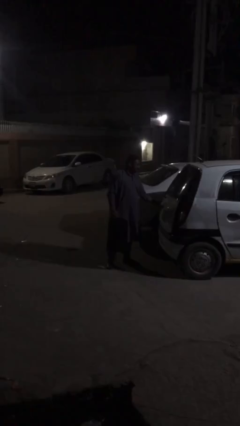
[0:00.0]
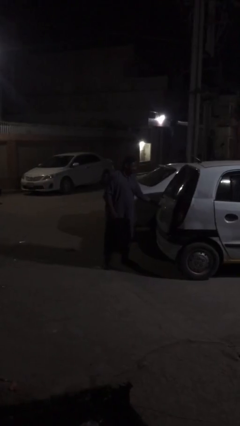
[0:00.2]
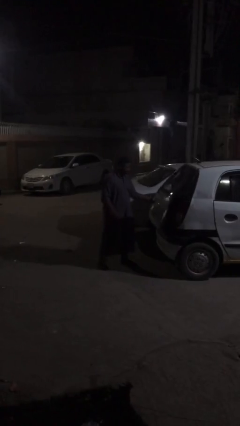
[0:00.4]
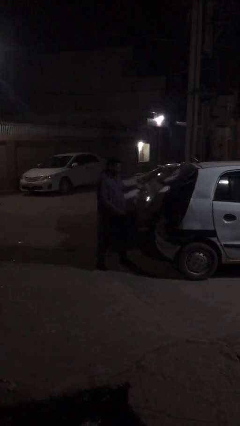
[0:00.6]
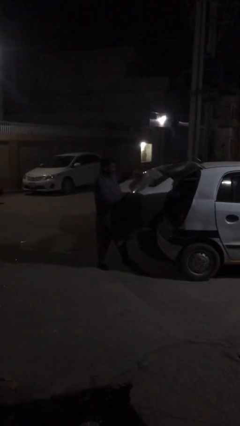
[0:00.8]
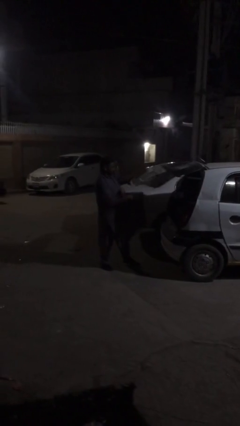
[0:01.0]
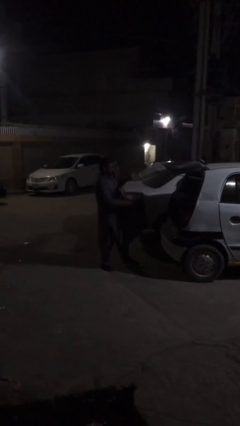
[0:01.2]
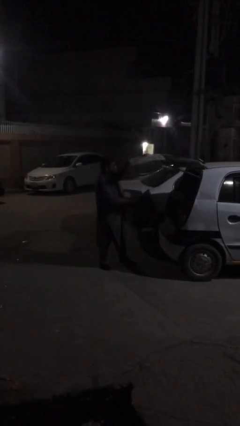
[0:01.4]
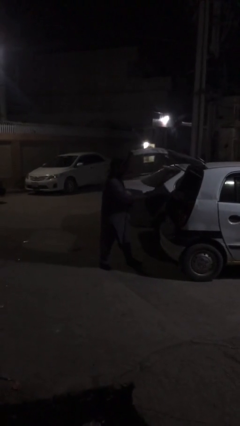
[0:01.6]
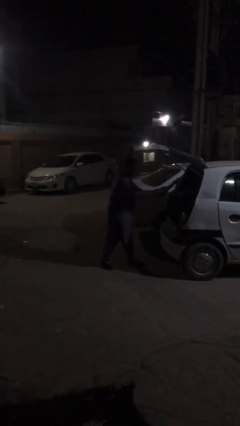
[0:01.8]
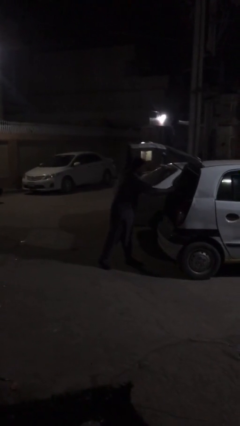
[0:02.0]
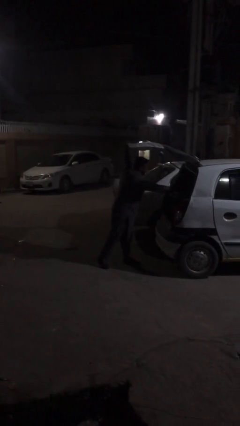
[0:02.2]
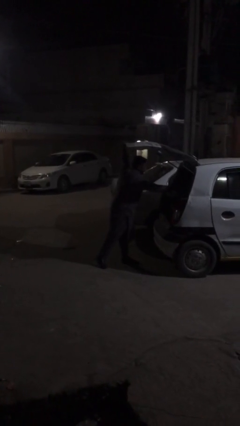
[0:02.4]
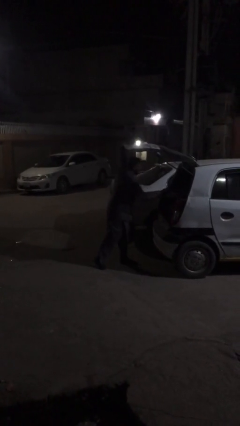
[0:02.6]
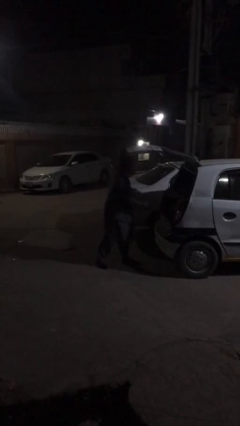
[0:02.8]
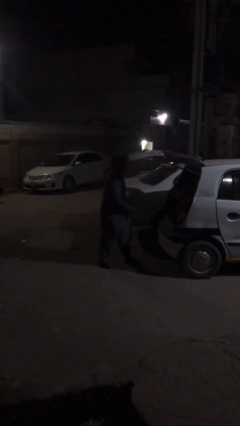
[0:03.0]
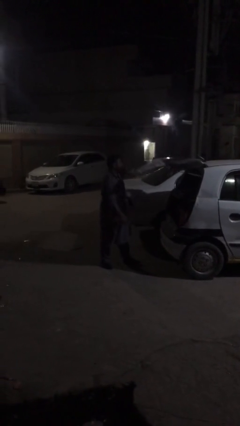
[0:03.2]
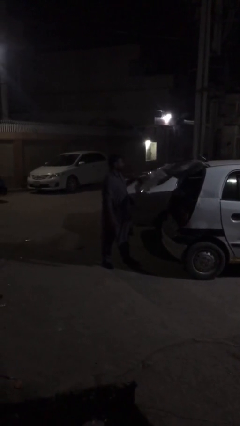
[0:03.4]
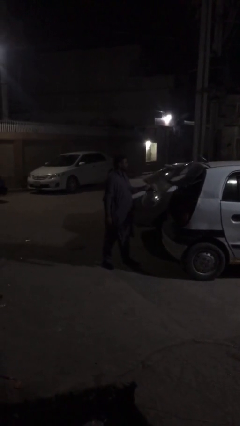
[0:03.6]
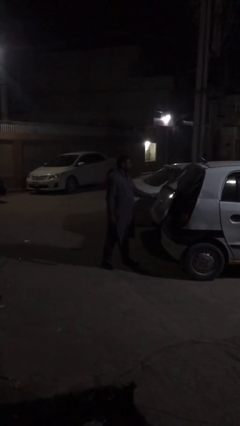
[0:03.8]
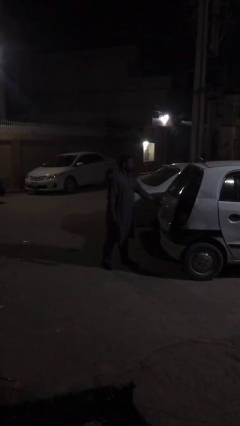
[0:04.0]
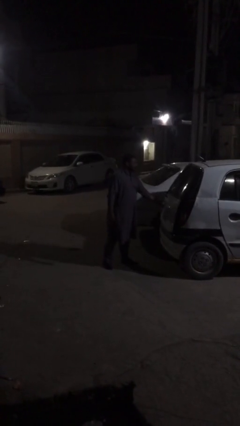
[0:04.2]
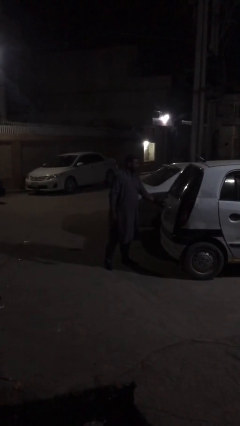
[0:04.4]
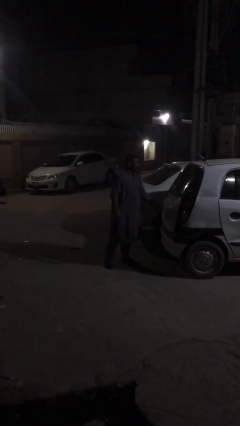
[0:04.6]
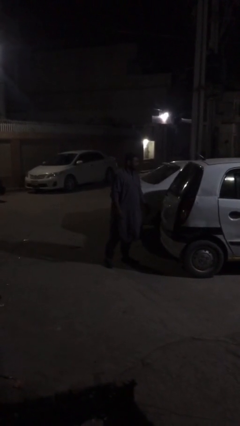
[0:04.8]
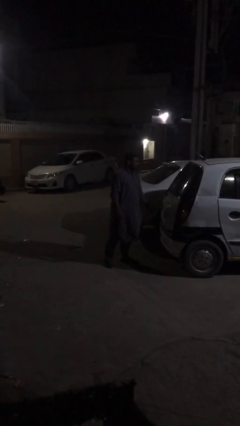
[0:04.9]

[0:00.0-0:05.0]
person loads car

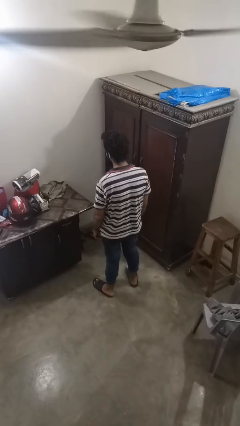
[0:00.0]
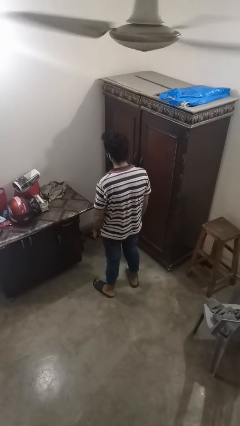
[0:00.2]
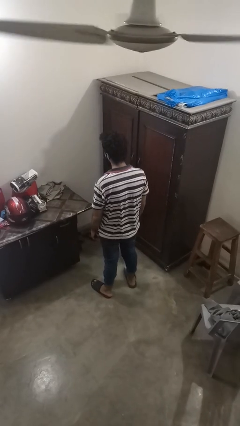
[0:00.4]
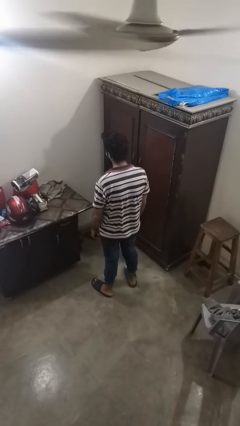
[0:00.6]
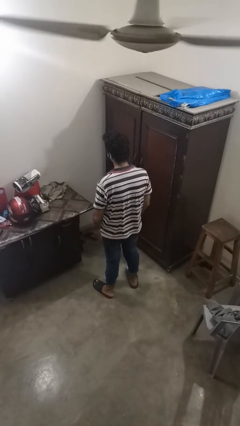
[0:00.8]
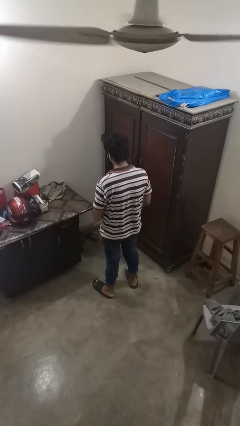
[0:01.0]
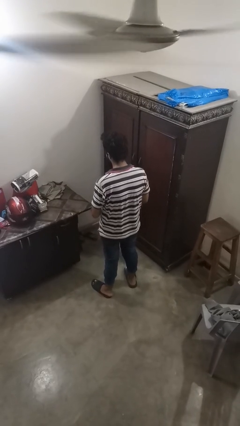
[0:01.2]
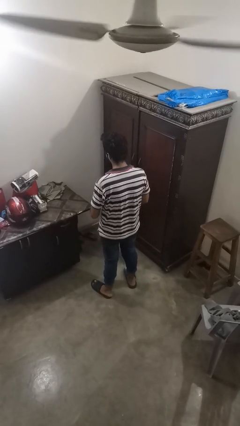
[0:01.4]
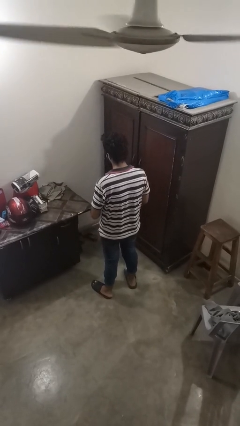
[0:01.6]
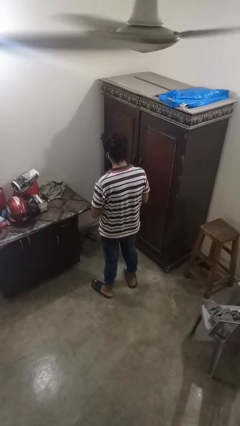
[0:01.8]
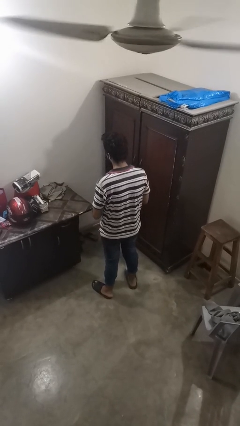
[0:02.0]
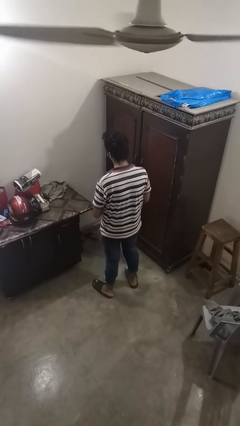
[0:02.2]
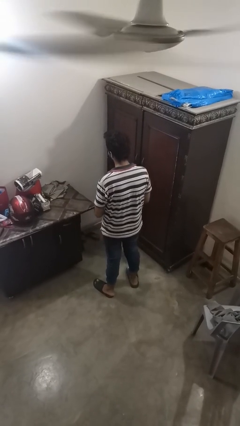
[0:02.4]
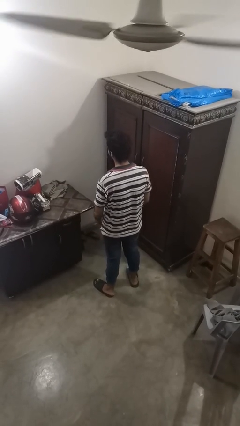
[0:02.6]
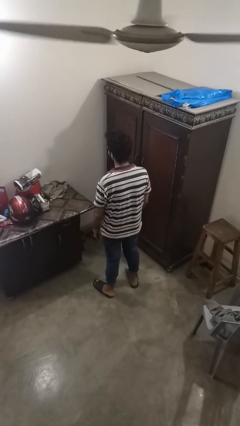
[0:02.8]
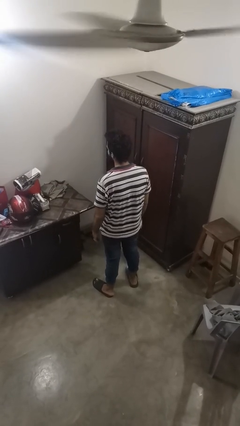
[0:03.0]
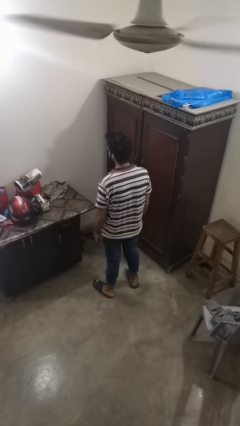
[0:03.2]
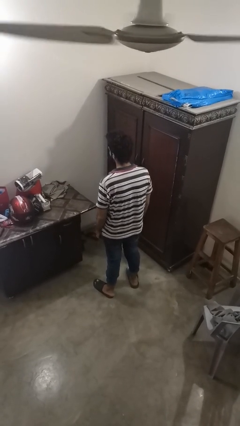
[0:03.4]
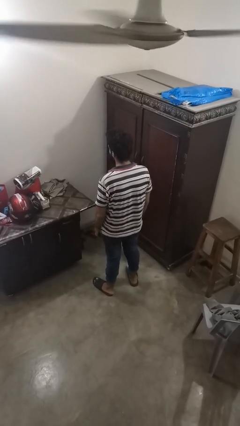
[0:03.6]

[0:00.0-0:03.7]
person puts on ring

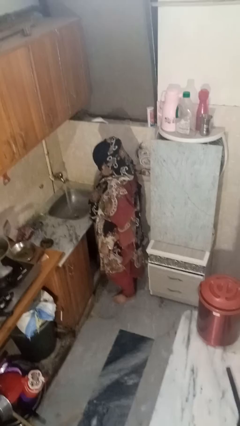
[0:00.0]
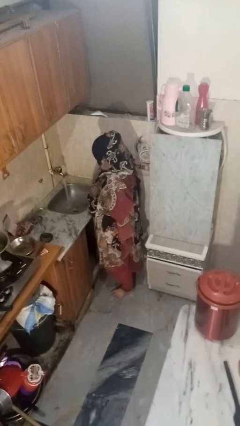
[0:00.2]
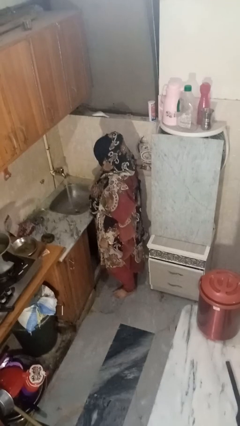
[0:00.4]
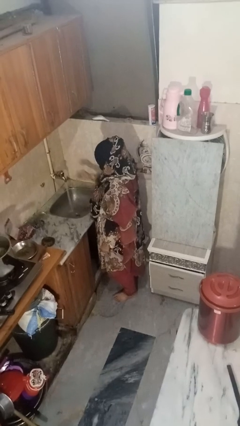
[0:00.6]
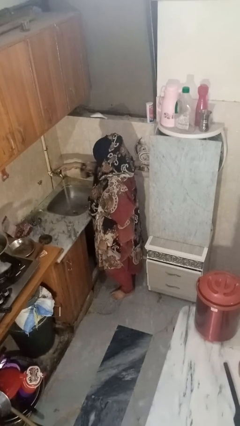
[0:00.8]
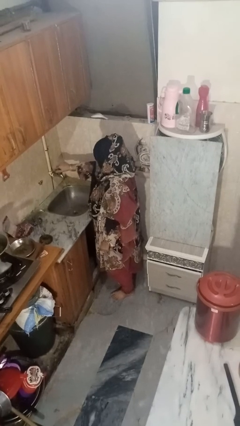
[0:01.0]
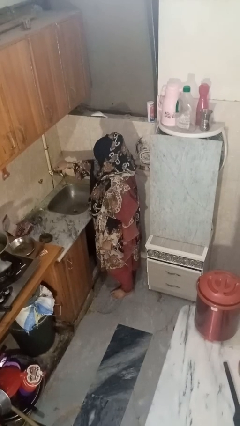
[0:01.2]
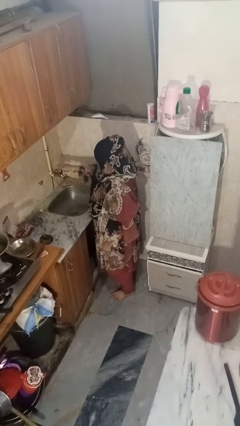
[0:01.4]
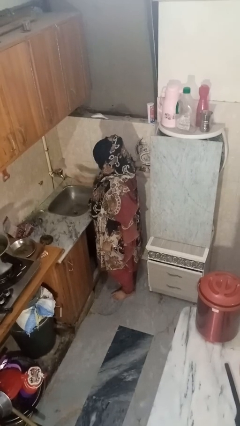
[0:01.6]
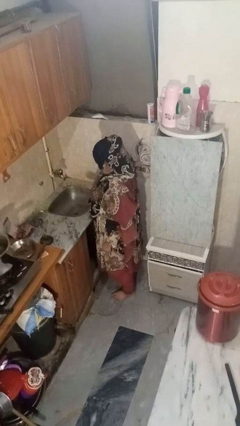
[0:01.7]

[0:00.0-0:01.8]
person turns off faucet

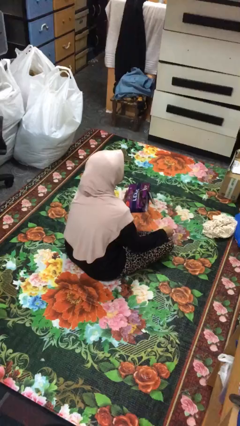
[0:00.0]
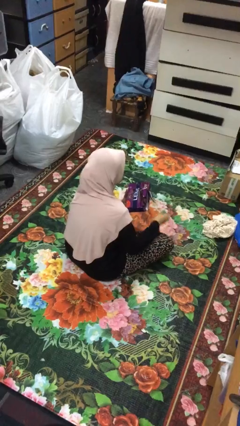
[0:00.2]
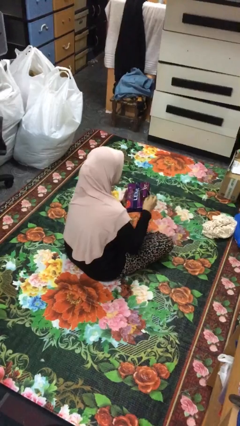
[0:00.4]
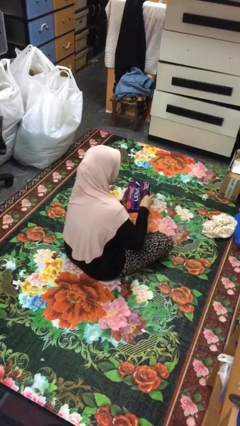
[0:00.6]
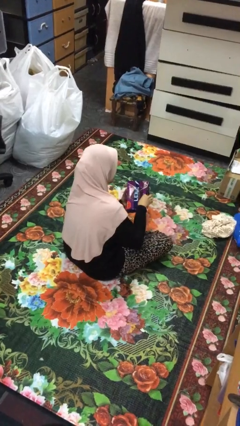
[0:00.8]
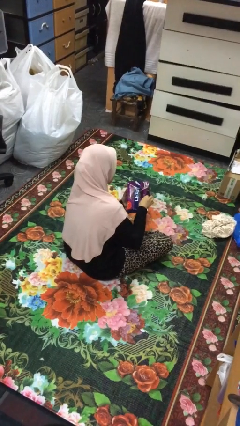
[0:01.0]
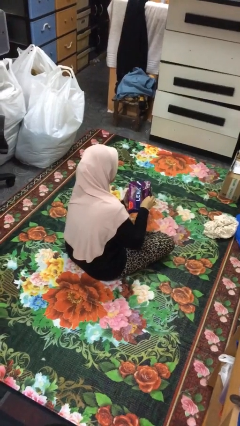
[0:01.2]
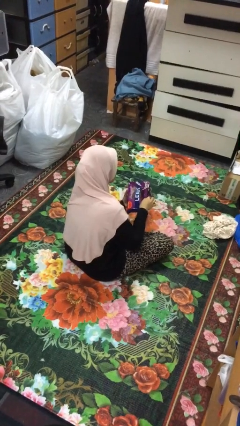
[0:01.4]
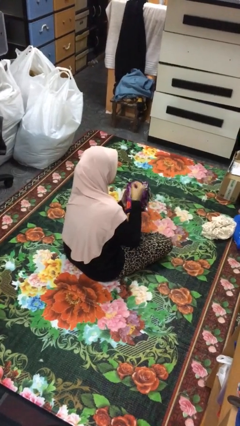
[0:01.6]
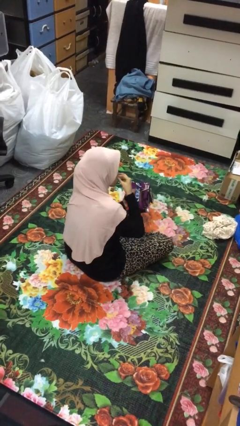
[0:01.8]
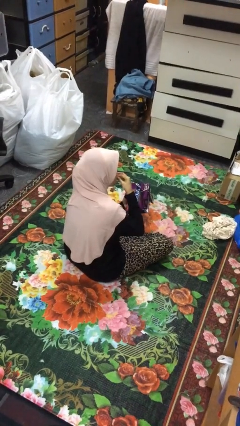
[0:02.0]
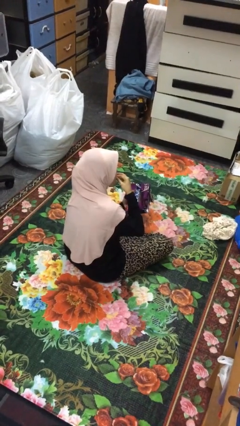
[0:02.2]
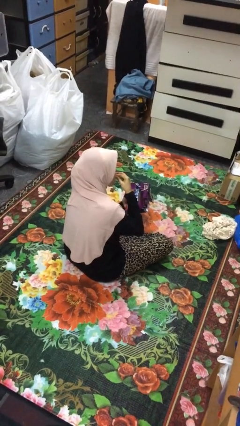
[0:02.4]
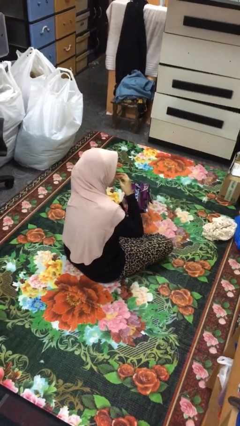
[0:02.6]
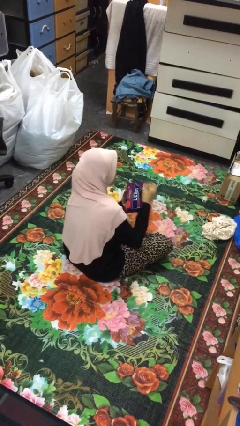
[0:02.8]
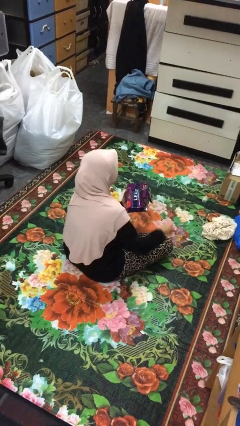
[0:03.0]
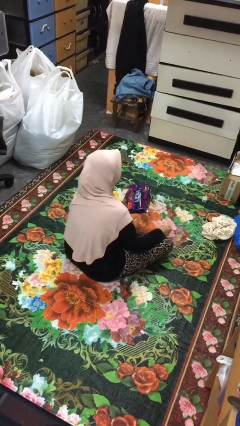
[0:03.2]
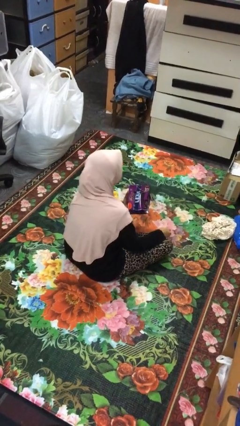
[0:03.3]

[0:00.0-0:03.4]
person eats snack from bag

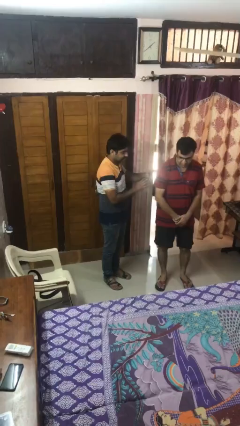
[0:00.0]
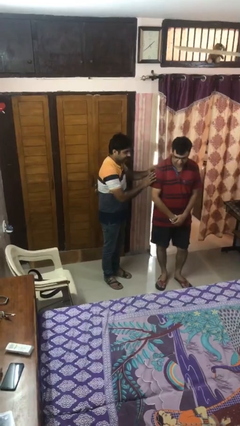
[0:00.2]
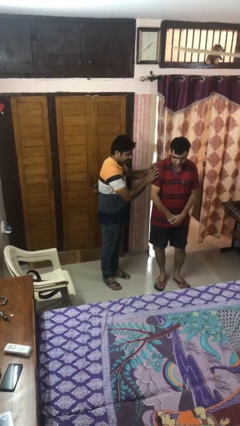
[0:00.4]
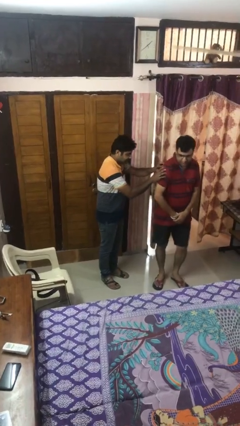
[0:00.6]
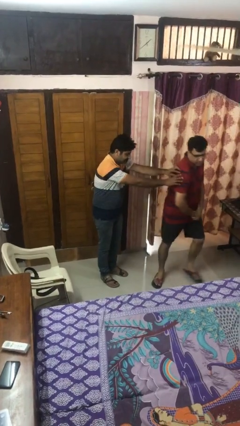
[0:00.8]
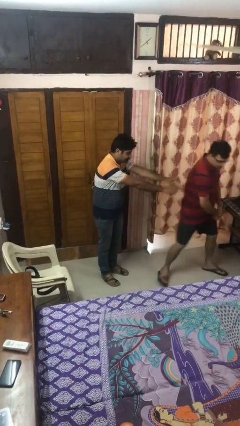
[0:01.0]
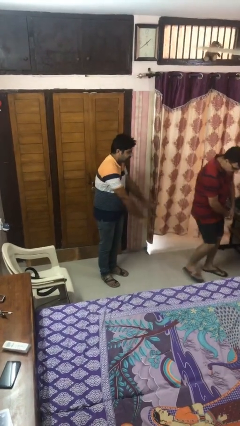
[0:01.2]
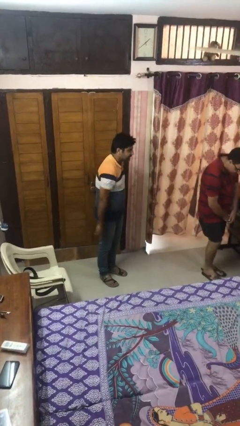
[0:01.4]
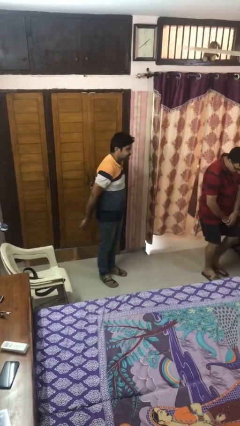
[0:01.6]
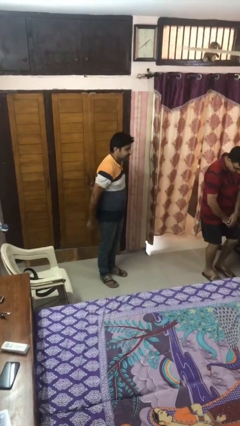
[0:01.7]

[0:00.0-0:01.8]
person shoves person

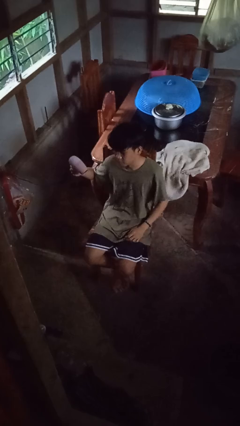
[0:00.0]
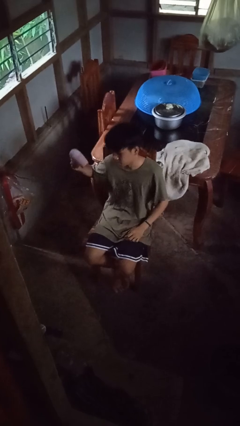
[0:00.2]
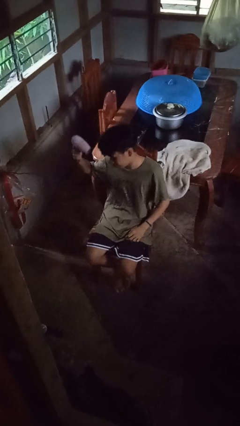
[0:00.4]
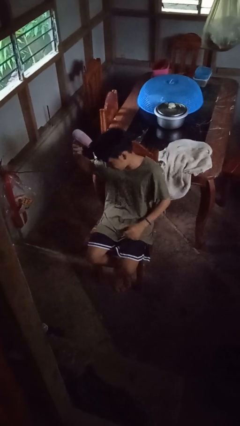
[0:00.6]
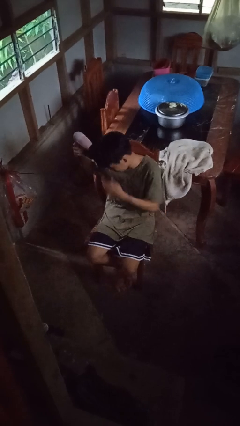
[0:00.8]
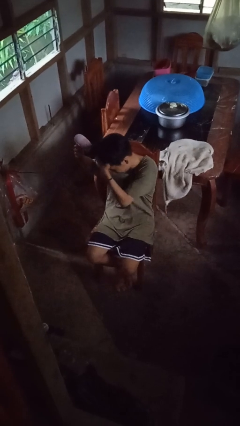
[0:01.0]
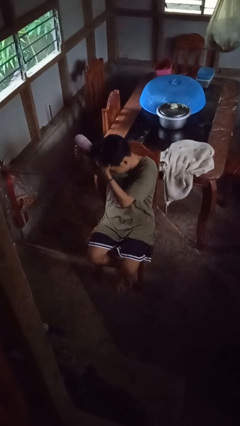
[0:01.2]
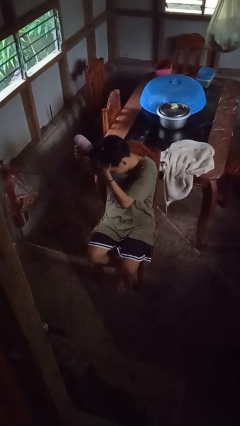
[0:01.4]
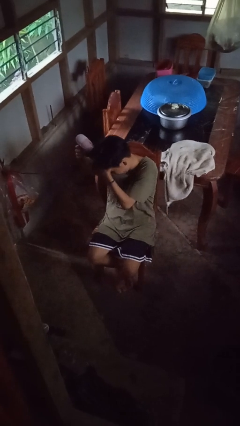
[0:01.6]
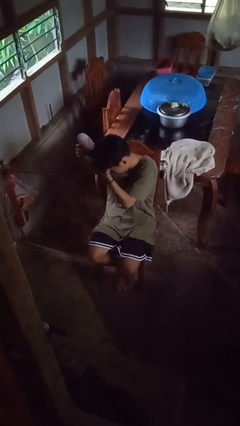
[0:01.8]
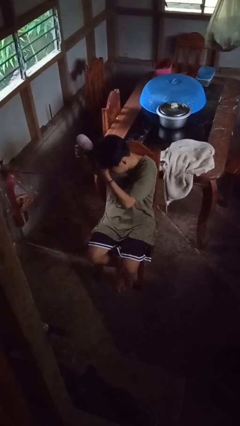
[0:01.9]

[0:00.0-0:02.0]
person dries hair with hairdryer

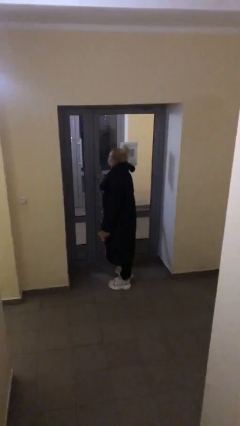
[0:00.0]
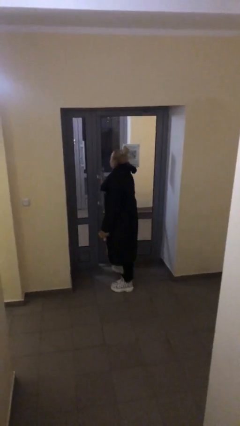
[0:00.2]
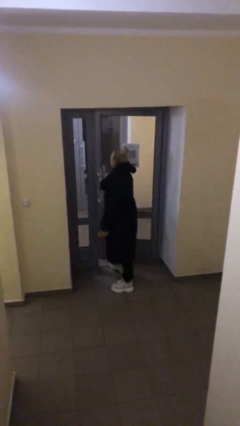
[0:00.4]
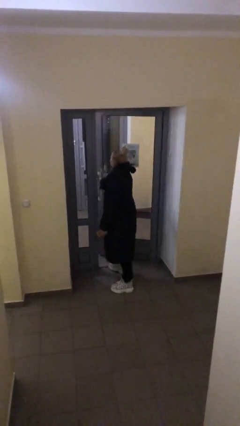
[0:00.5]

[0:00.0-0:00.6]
person opens facility door
